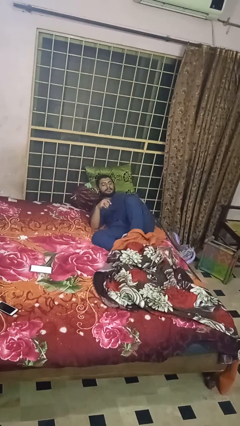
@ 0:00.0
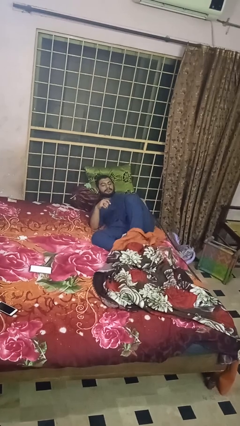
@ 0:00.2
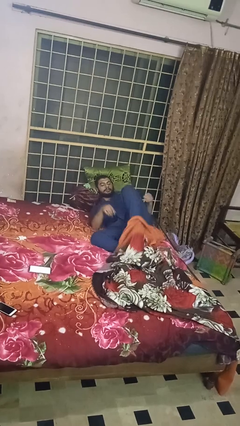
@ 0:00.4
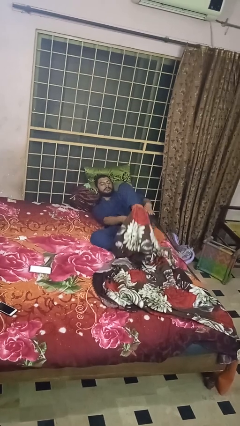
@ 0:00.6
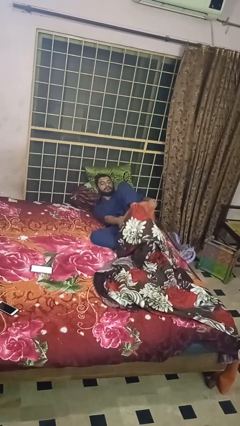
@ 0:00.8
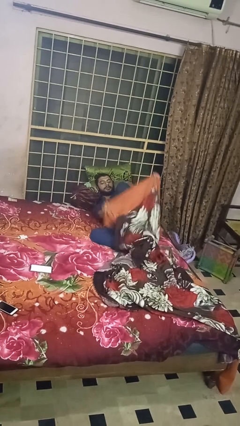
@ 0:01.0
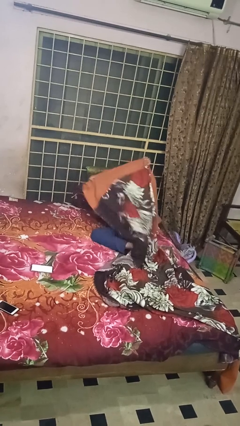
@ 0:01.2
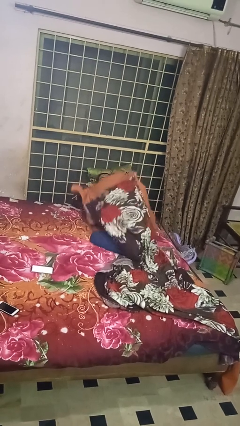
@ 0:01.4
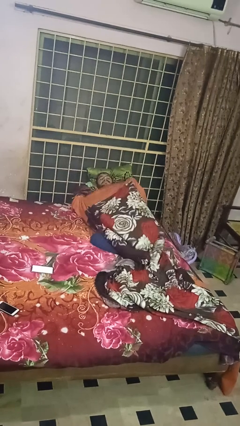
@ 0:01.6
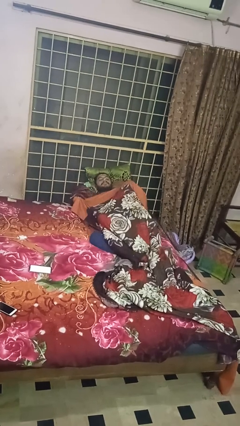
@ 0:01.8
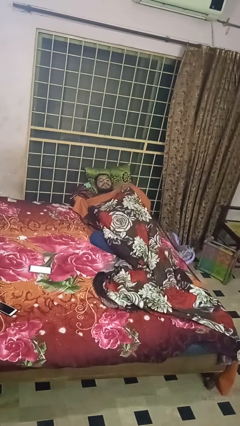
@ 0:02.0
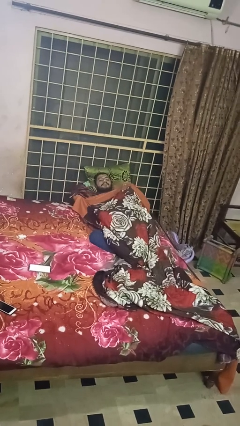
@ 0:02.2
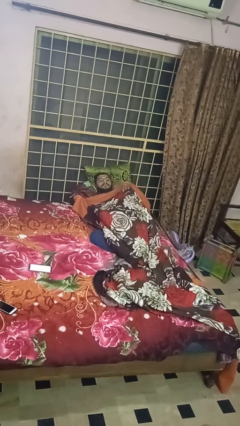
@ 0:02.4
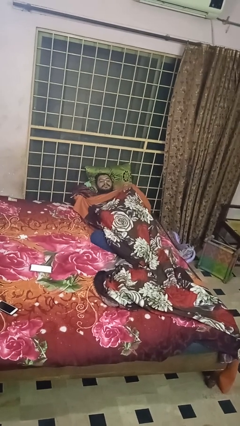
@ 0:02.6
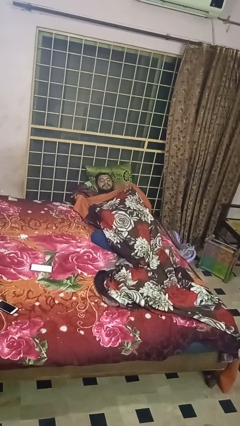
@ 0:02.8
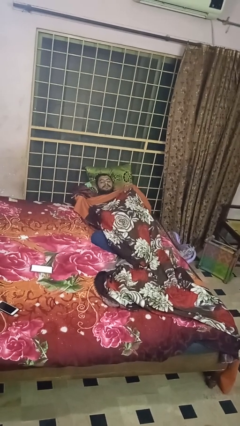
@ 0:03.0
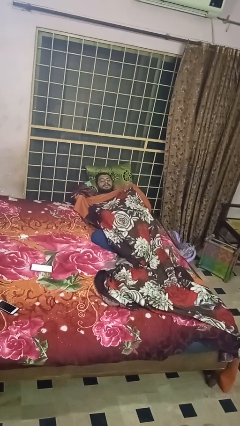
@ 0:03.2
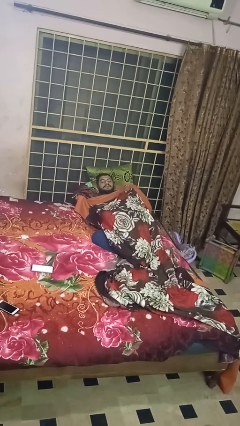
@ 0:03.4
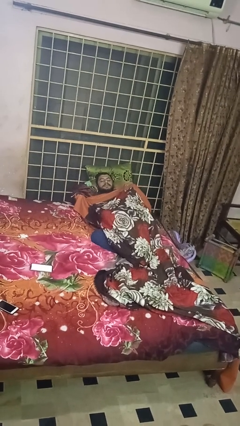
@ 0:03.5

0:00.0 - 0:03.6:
person covers with bedsheets

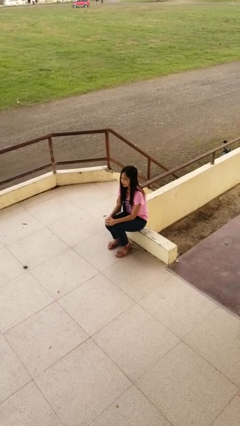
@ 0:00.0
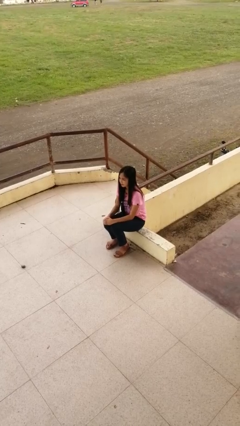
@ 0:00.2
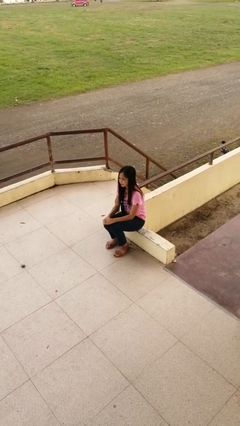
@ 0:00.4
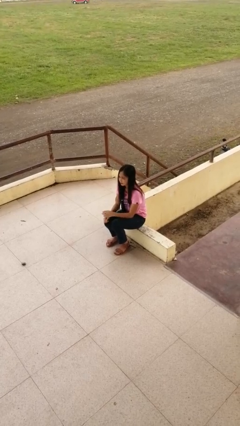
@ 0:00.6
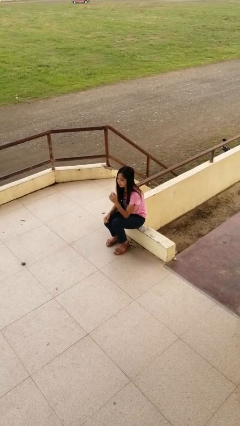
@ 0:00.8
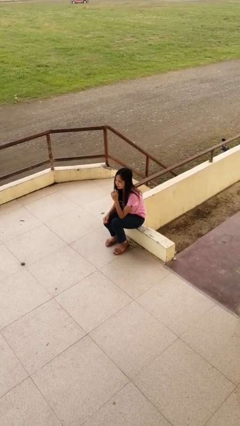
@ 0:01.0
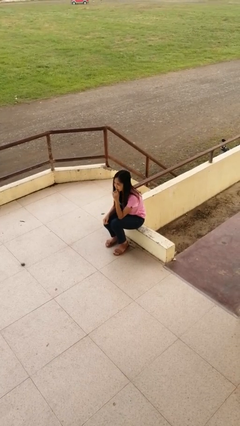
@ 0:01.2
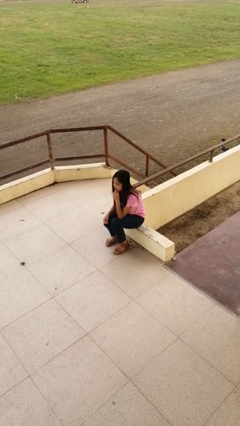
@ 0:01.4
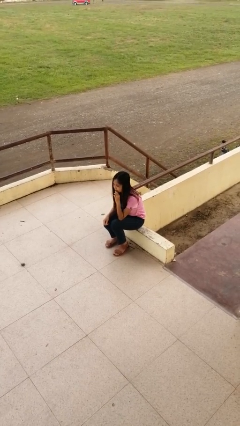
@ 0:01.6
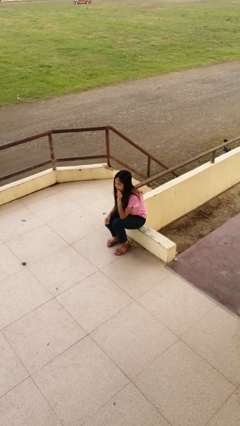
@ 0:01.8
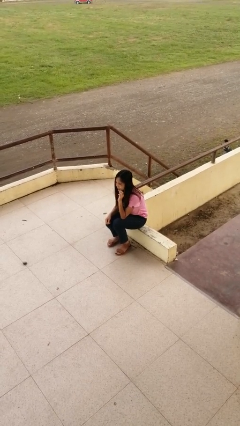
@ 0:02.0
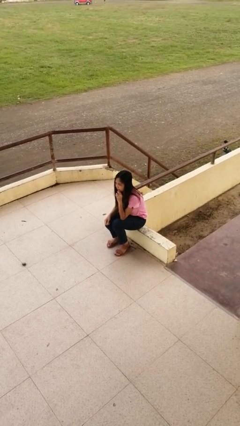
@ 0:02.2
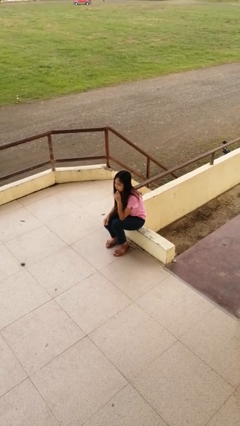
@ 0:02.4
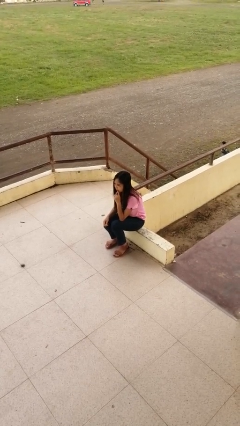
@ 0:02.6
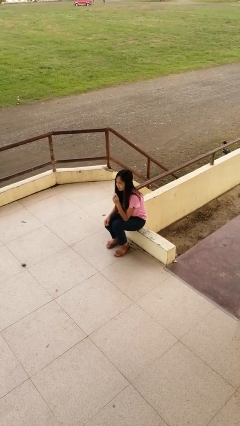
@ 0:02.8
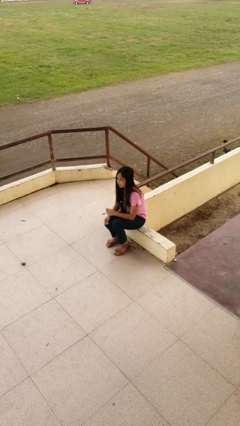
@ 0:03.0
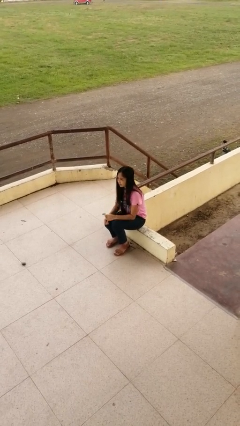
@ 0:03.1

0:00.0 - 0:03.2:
person strokes chin

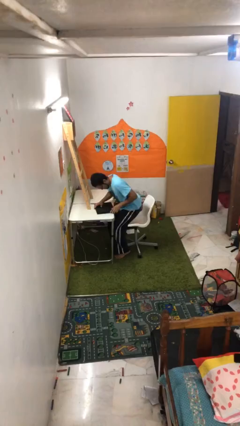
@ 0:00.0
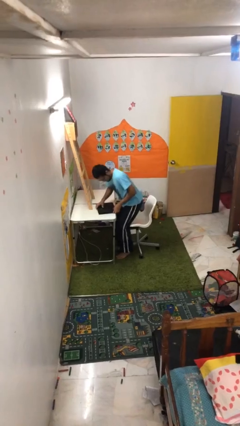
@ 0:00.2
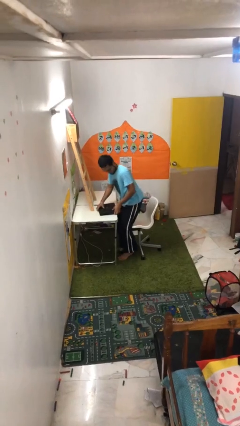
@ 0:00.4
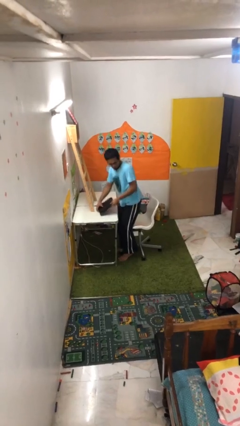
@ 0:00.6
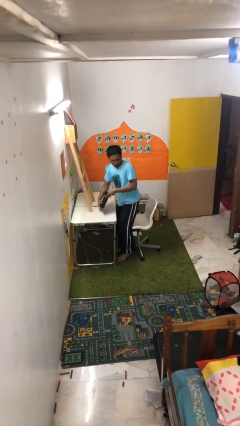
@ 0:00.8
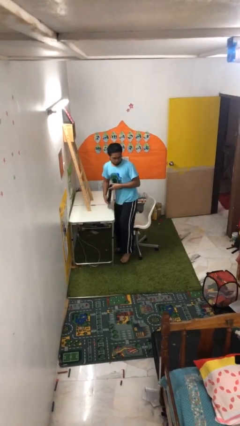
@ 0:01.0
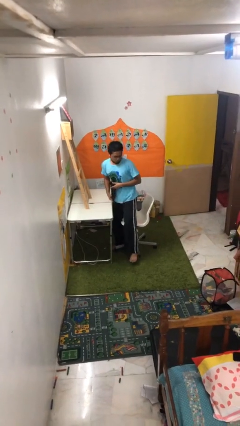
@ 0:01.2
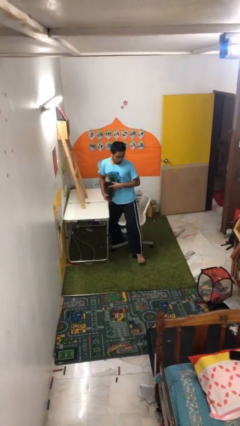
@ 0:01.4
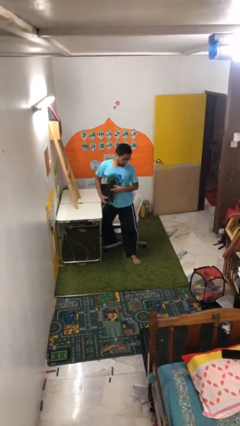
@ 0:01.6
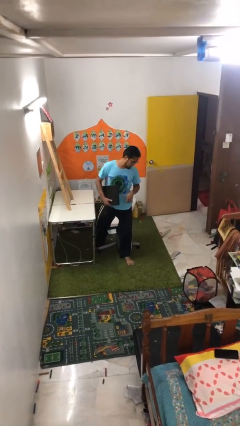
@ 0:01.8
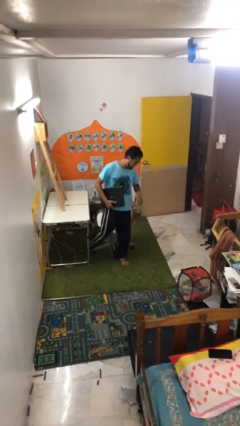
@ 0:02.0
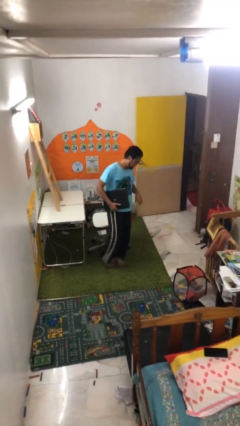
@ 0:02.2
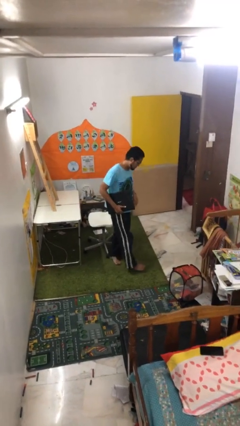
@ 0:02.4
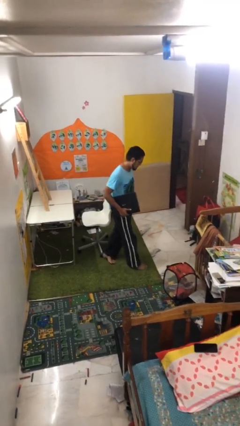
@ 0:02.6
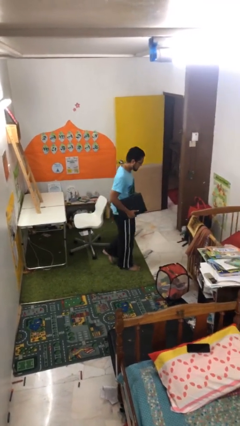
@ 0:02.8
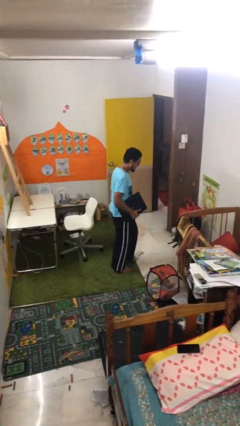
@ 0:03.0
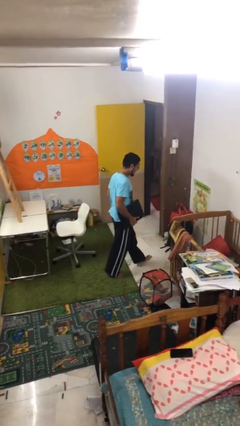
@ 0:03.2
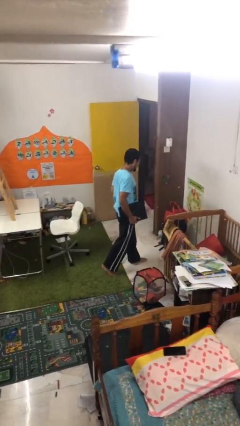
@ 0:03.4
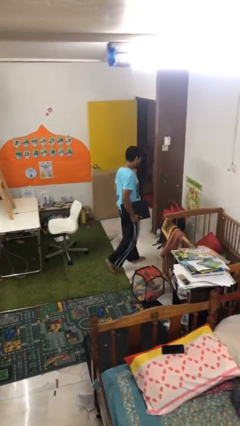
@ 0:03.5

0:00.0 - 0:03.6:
person stands up

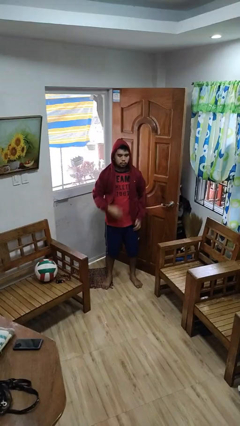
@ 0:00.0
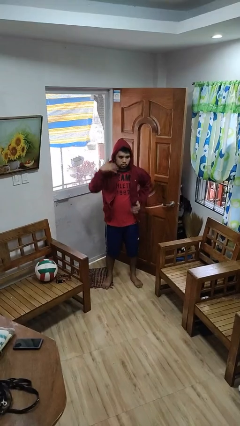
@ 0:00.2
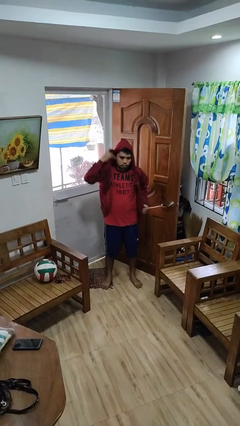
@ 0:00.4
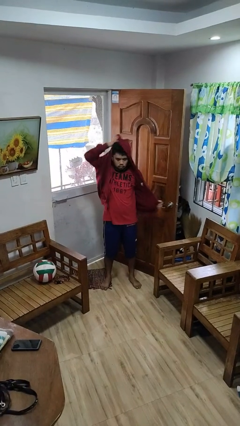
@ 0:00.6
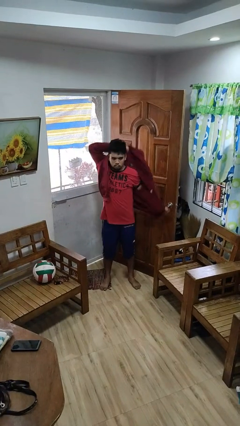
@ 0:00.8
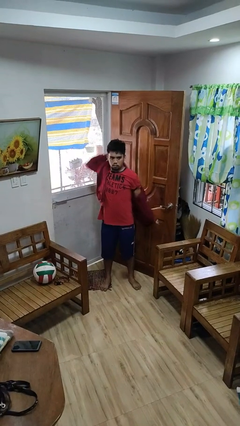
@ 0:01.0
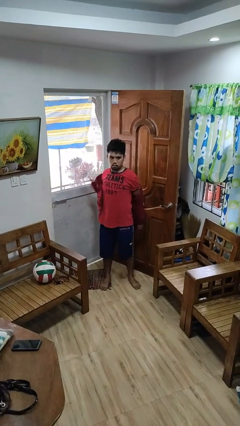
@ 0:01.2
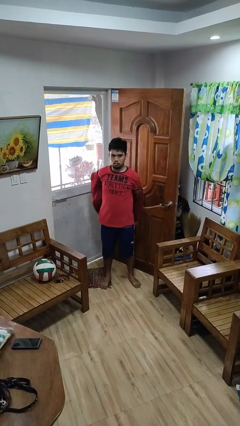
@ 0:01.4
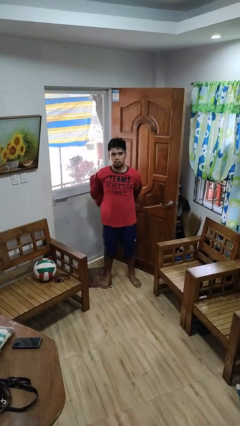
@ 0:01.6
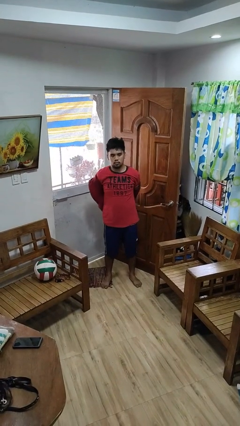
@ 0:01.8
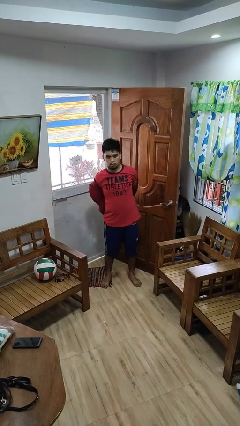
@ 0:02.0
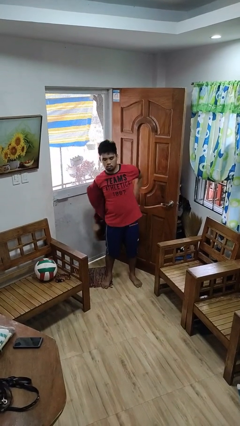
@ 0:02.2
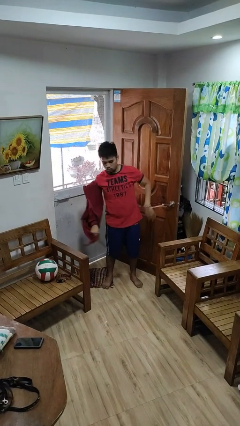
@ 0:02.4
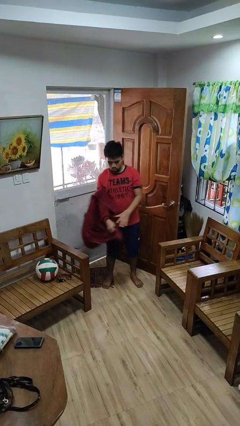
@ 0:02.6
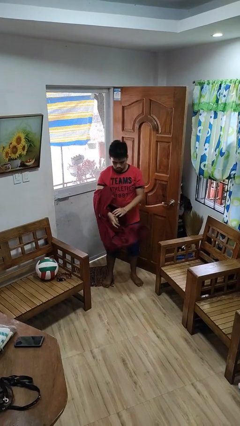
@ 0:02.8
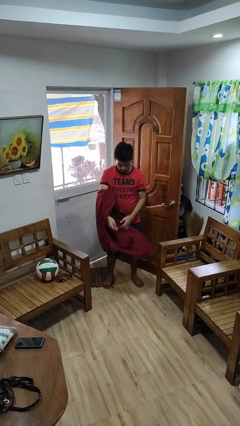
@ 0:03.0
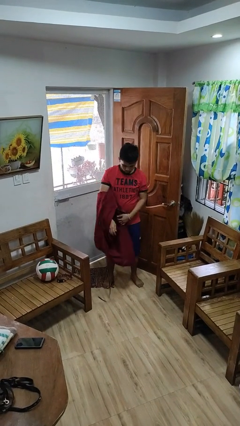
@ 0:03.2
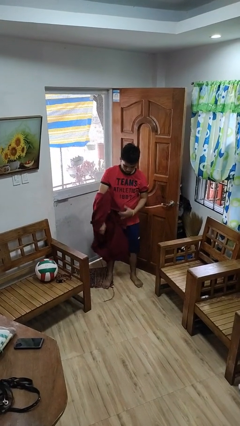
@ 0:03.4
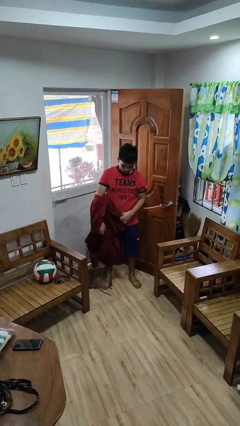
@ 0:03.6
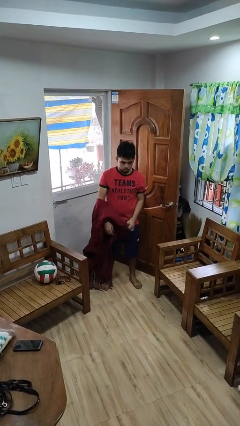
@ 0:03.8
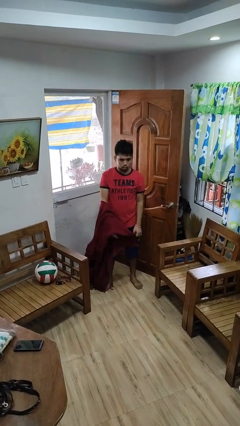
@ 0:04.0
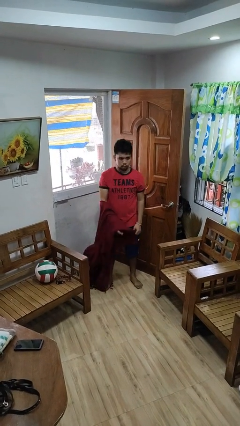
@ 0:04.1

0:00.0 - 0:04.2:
person takes off hoodie

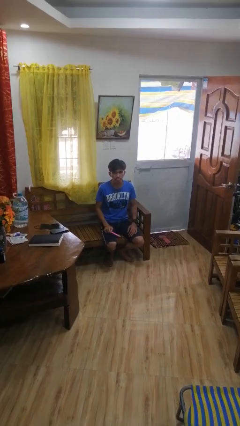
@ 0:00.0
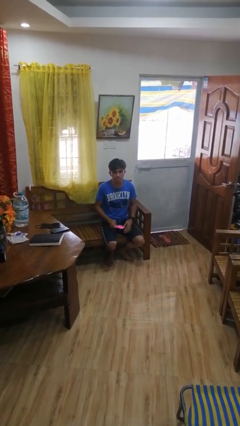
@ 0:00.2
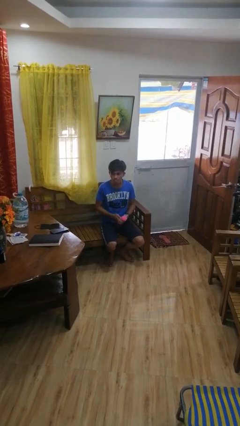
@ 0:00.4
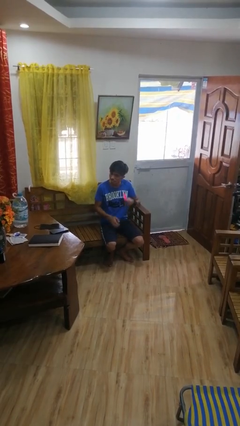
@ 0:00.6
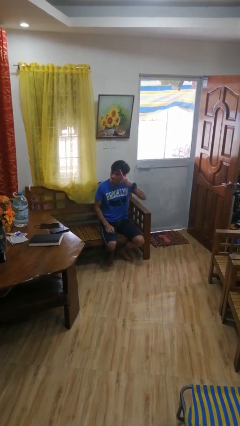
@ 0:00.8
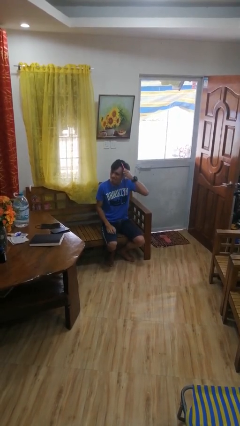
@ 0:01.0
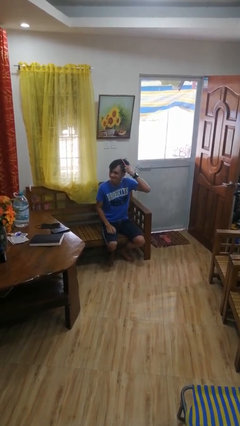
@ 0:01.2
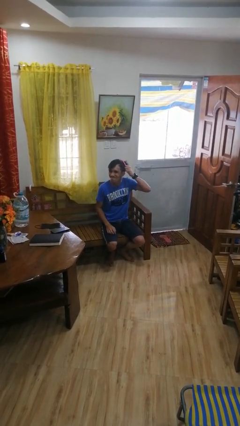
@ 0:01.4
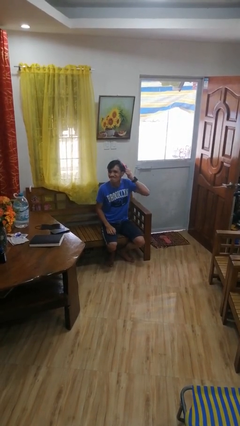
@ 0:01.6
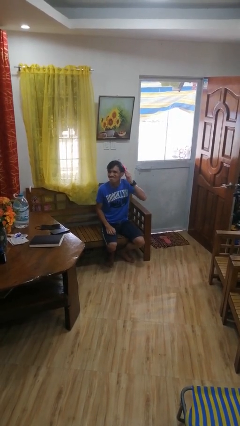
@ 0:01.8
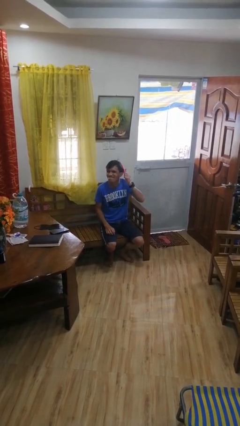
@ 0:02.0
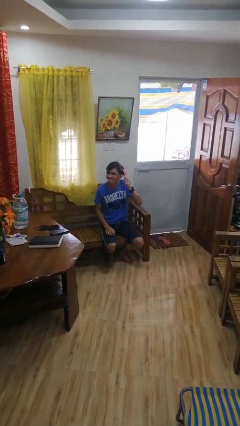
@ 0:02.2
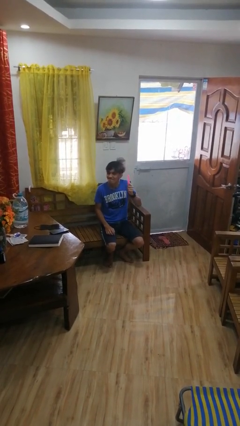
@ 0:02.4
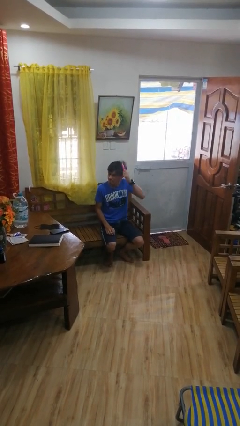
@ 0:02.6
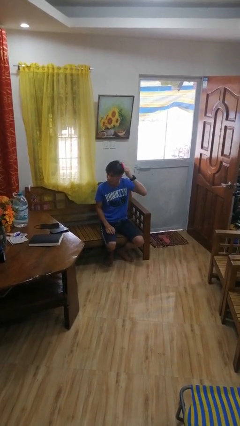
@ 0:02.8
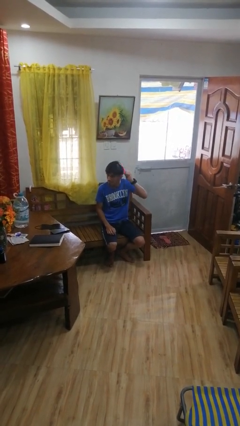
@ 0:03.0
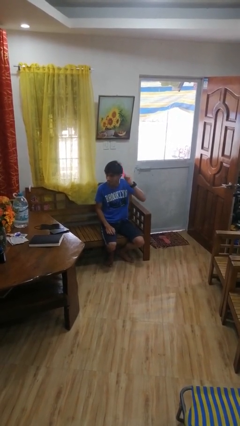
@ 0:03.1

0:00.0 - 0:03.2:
person brushes hair
